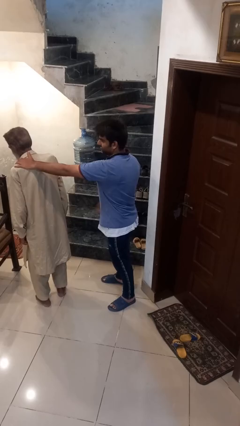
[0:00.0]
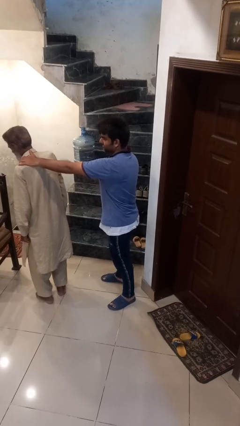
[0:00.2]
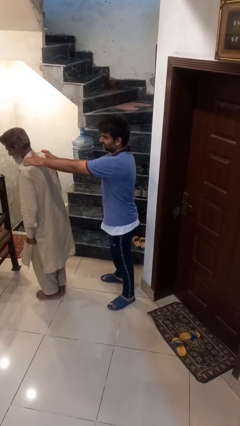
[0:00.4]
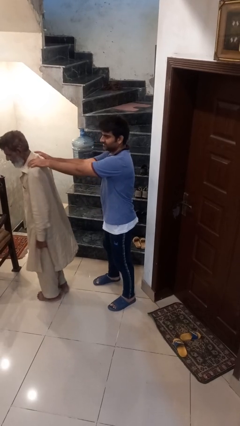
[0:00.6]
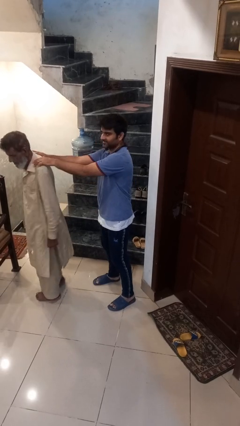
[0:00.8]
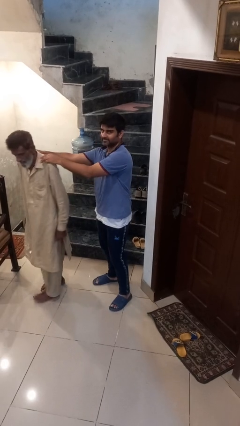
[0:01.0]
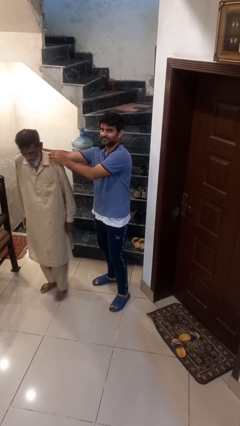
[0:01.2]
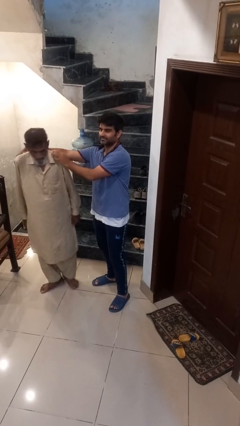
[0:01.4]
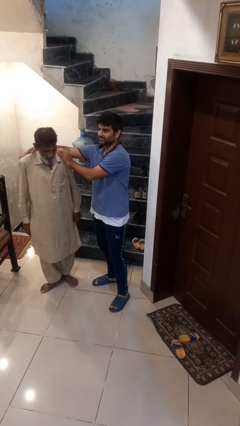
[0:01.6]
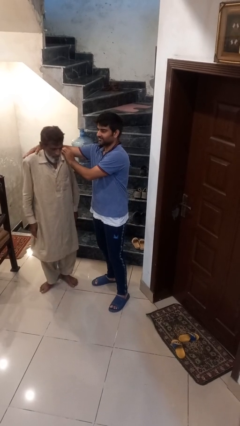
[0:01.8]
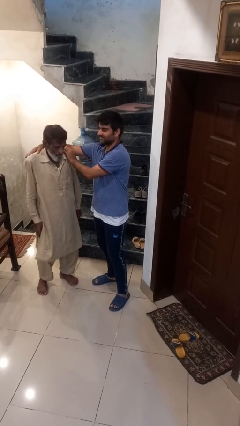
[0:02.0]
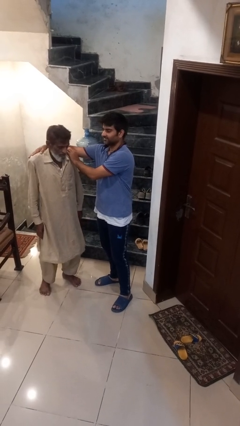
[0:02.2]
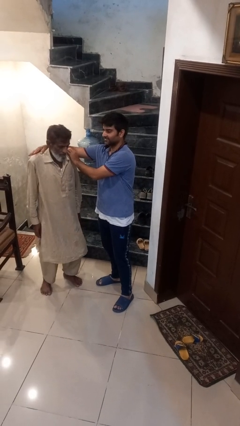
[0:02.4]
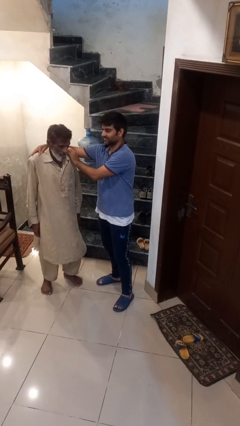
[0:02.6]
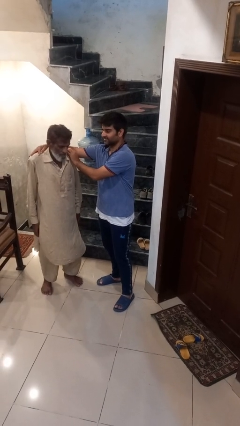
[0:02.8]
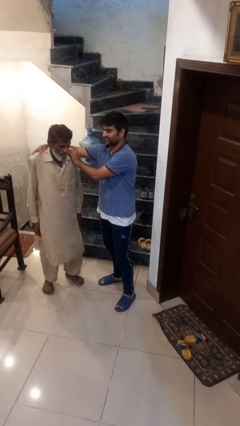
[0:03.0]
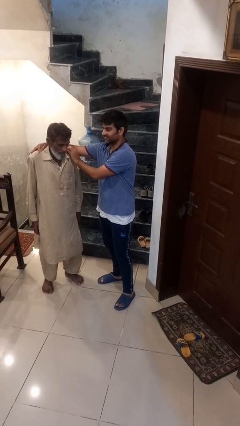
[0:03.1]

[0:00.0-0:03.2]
person spins person around

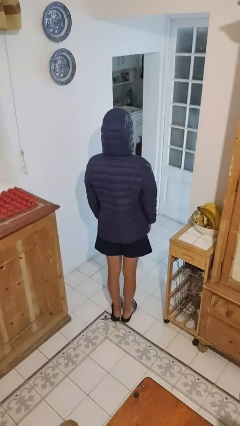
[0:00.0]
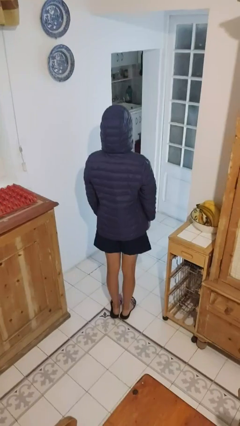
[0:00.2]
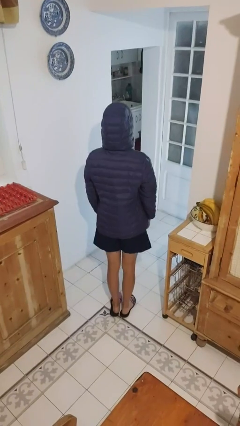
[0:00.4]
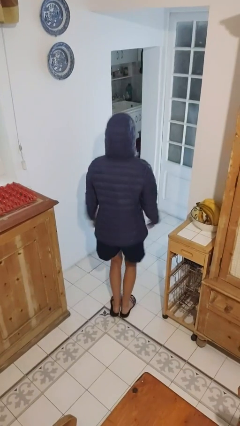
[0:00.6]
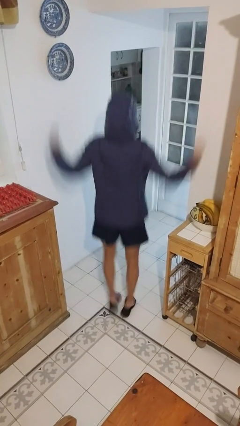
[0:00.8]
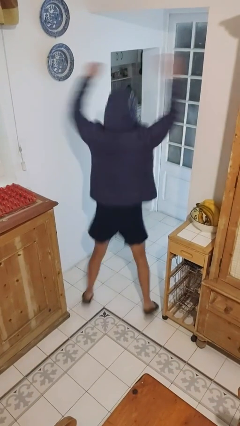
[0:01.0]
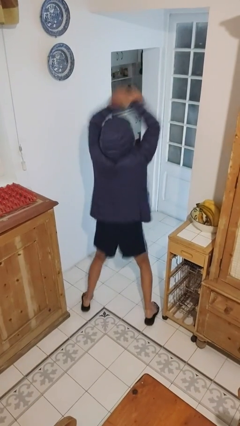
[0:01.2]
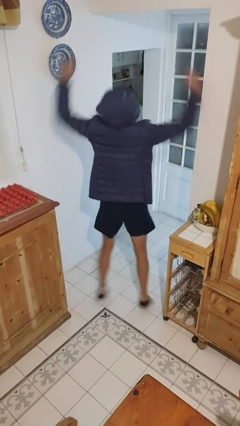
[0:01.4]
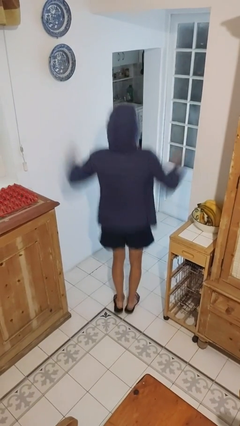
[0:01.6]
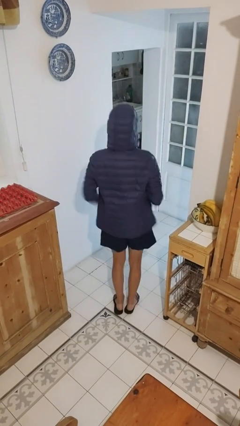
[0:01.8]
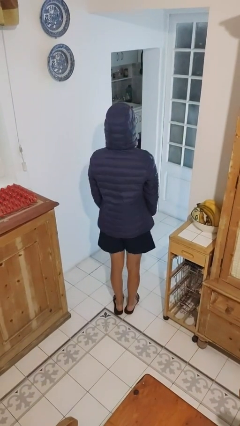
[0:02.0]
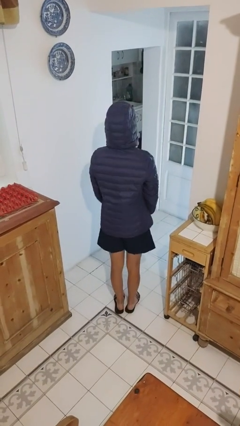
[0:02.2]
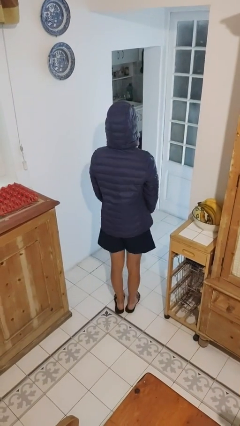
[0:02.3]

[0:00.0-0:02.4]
person exercises with jumping jacks

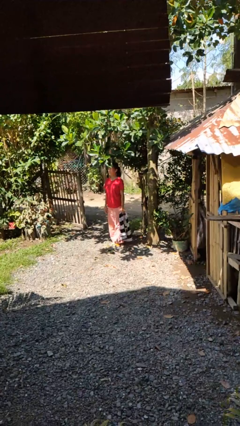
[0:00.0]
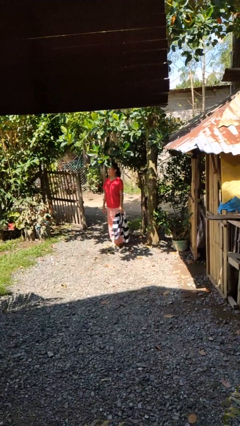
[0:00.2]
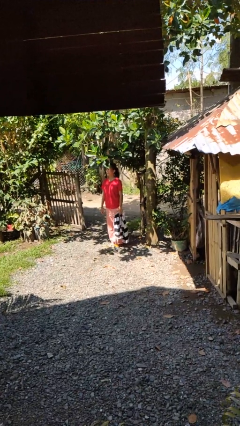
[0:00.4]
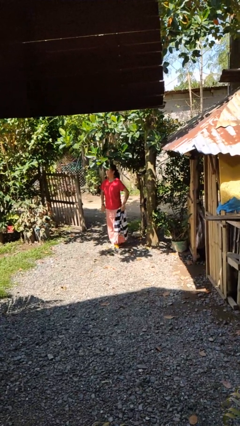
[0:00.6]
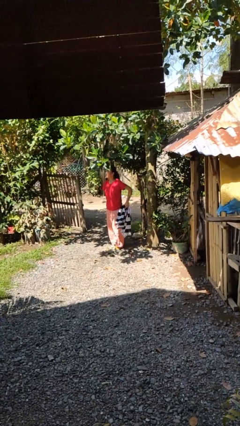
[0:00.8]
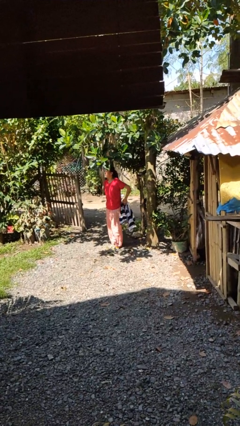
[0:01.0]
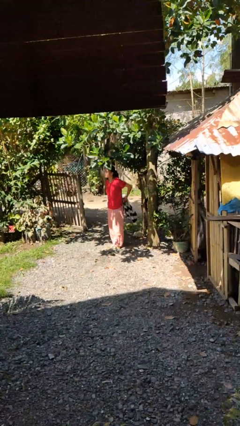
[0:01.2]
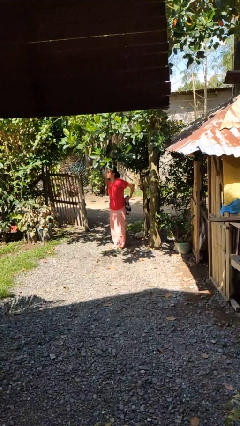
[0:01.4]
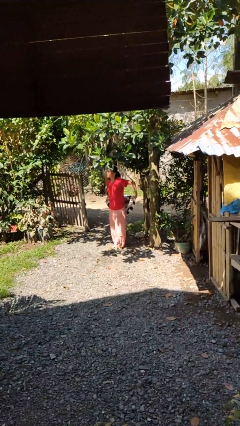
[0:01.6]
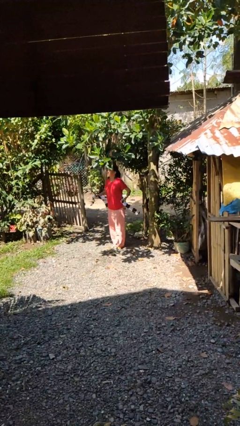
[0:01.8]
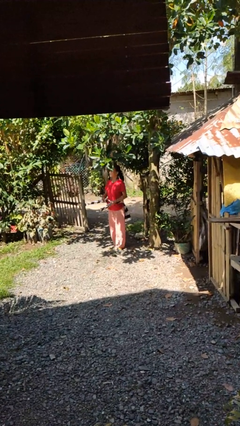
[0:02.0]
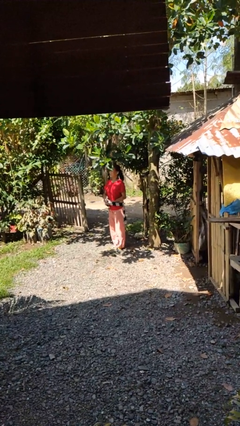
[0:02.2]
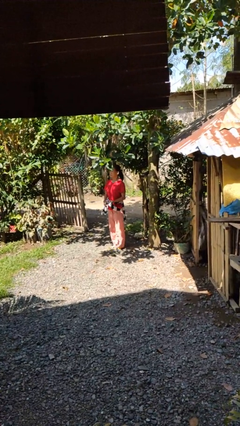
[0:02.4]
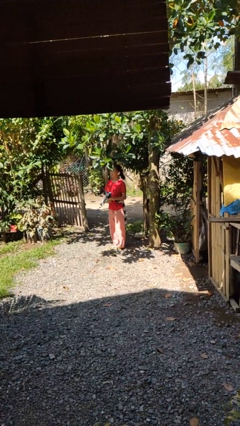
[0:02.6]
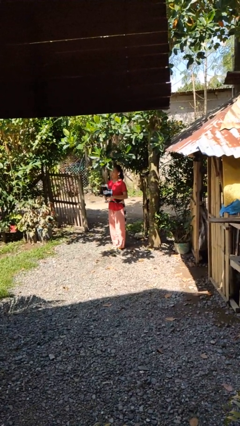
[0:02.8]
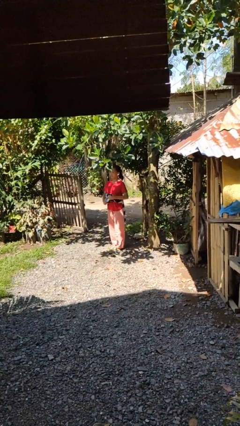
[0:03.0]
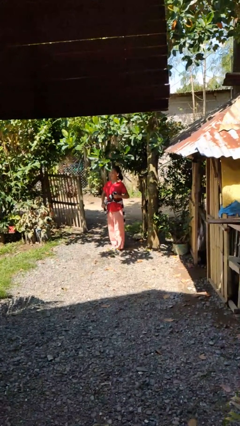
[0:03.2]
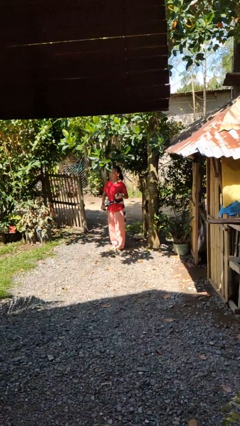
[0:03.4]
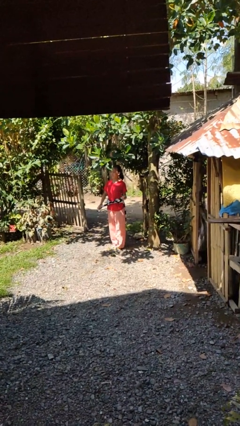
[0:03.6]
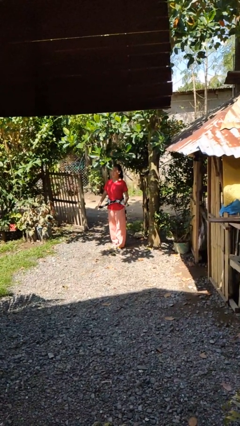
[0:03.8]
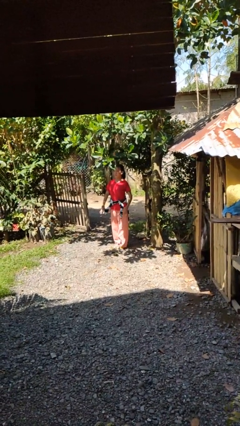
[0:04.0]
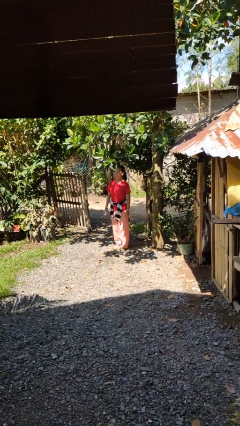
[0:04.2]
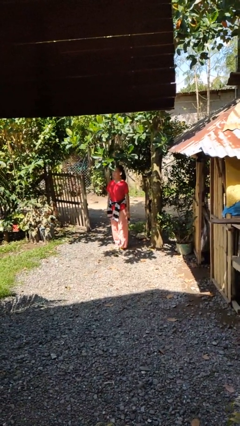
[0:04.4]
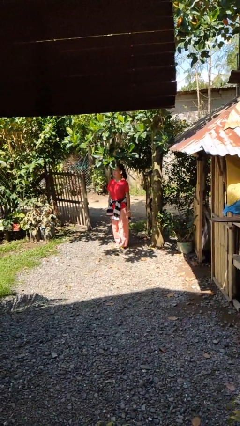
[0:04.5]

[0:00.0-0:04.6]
person ties jacket around waist

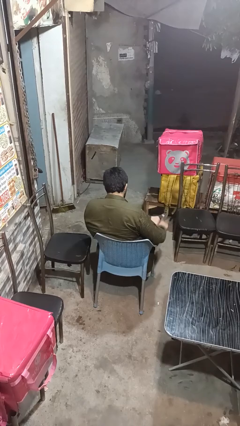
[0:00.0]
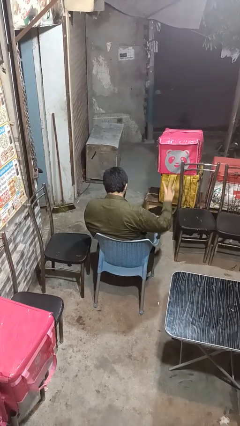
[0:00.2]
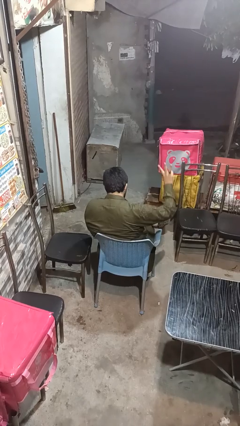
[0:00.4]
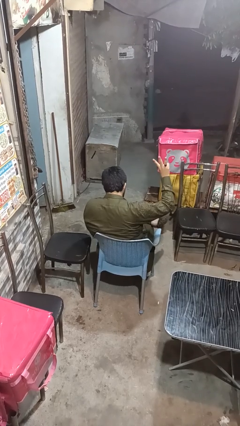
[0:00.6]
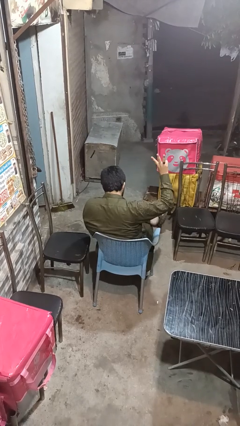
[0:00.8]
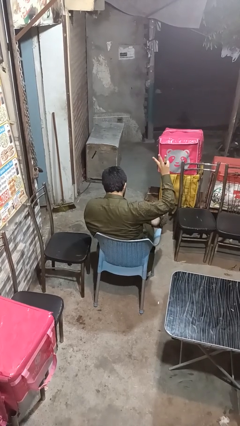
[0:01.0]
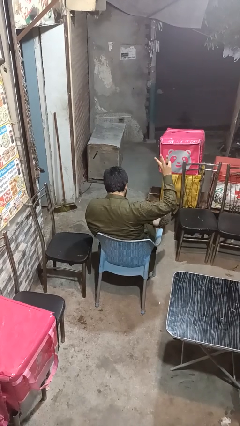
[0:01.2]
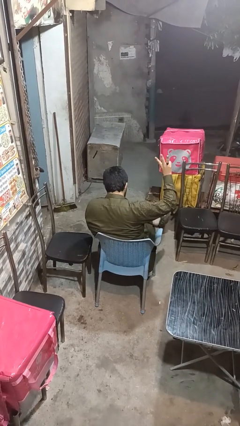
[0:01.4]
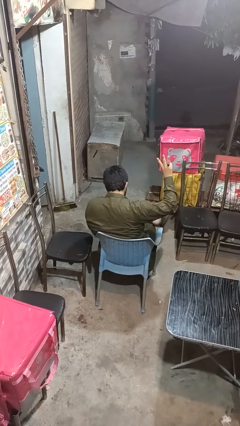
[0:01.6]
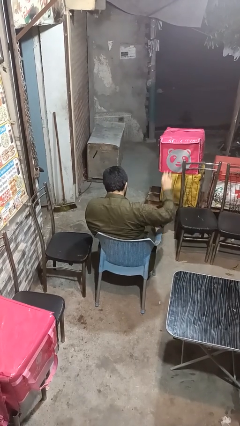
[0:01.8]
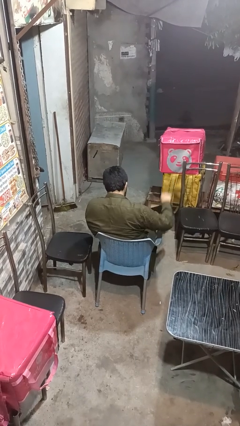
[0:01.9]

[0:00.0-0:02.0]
person gestures number three

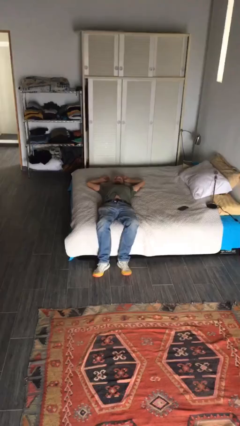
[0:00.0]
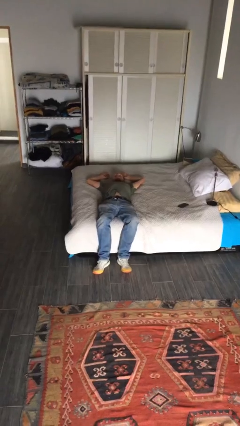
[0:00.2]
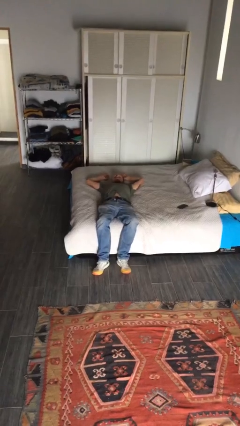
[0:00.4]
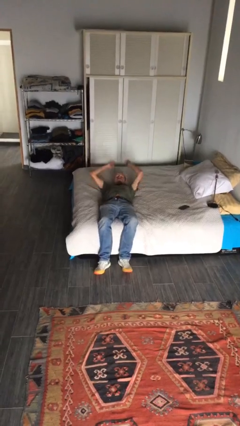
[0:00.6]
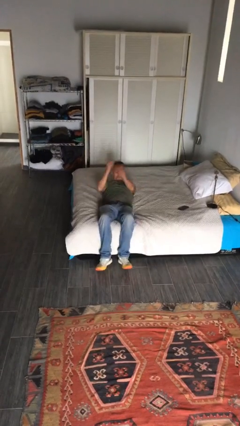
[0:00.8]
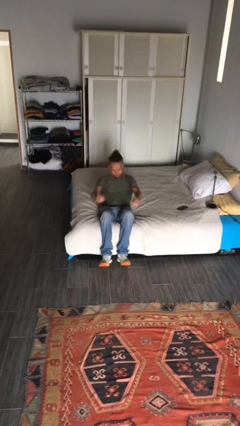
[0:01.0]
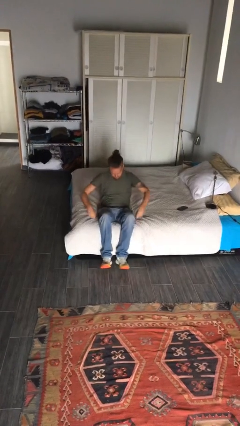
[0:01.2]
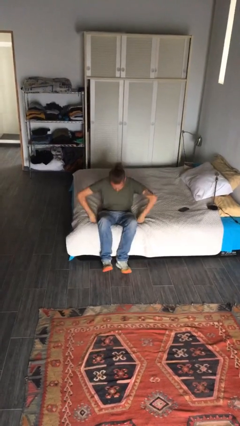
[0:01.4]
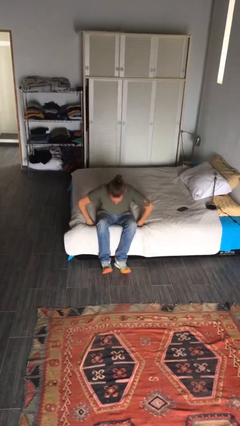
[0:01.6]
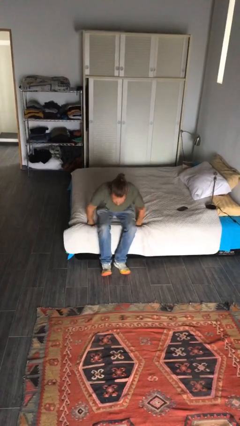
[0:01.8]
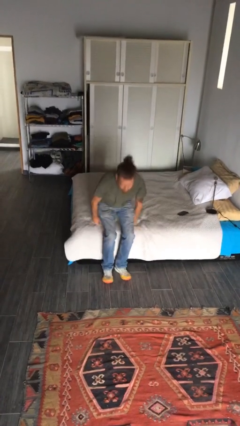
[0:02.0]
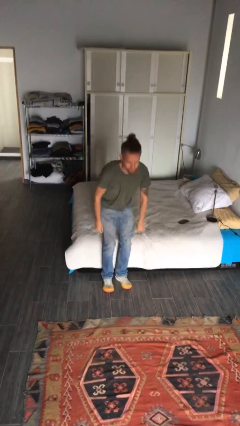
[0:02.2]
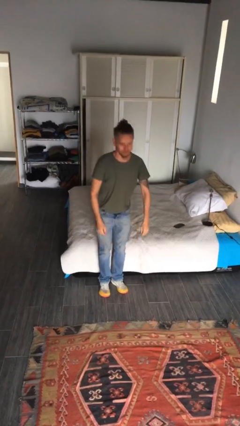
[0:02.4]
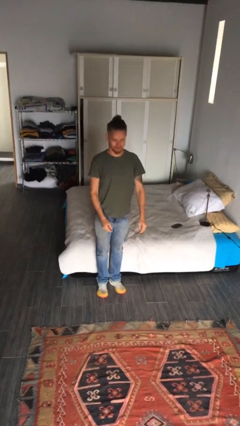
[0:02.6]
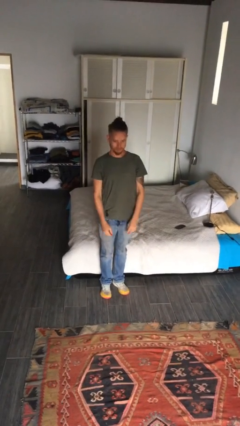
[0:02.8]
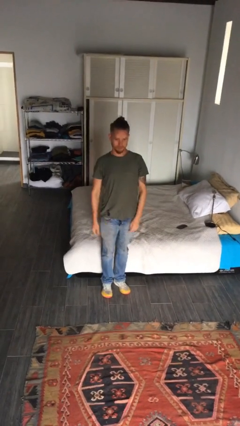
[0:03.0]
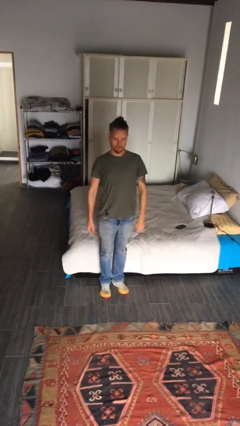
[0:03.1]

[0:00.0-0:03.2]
person stands up

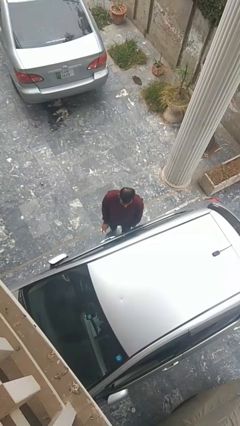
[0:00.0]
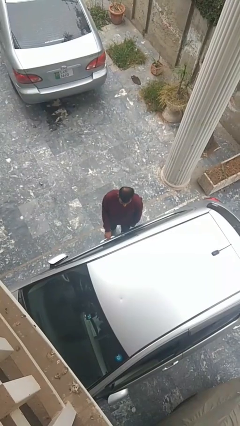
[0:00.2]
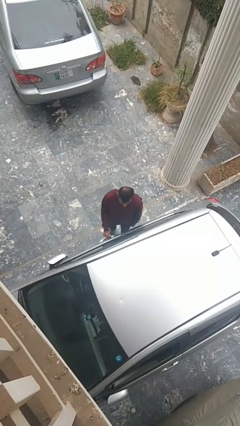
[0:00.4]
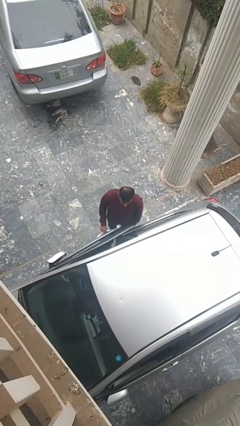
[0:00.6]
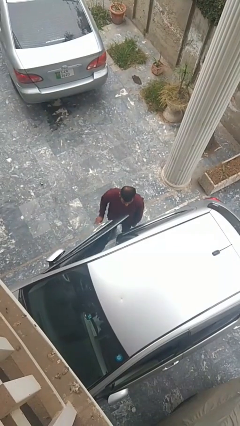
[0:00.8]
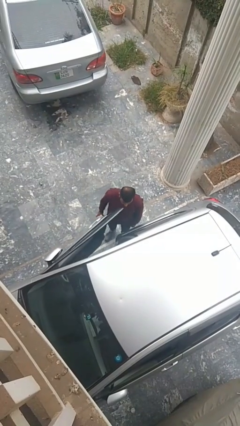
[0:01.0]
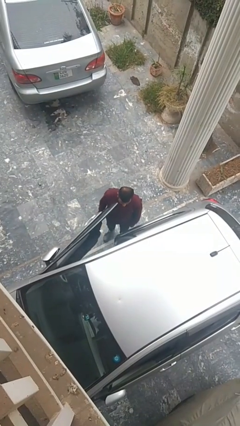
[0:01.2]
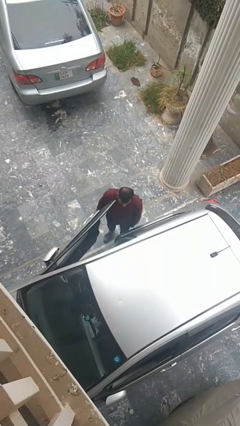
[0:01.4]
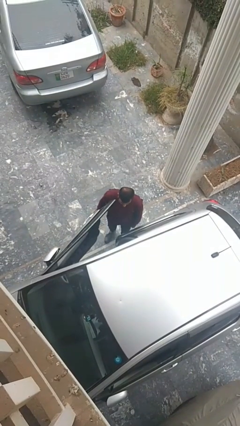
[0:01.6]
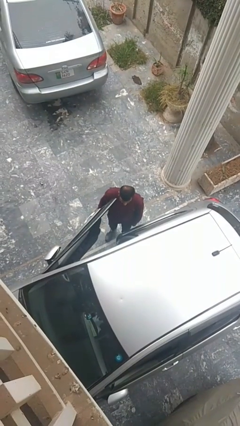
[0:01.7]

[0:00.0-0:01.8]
person opens car door

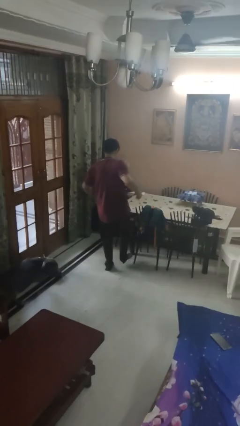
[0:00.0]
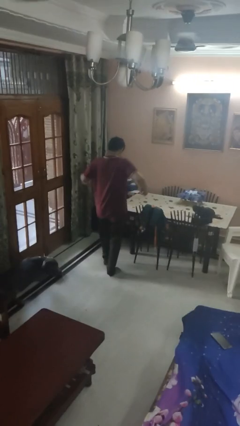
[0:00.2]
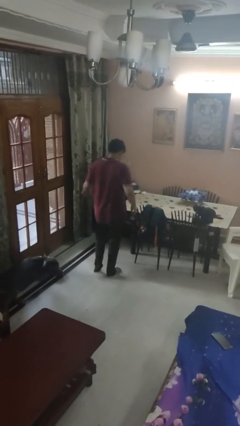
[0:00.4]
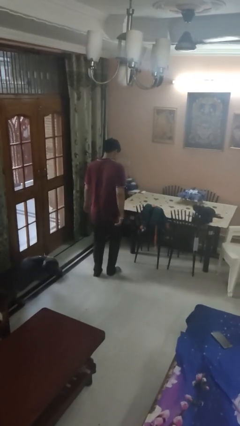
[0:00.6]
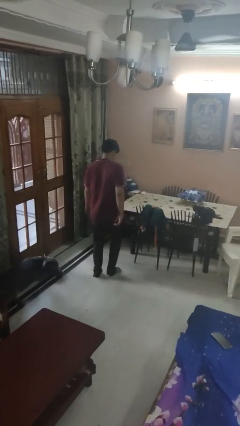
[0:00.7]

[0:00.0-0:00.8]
person stubs toe
